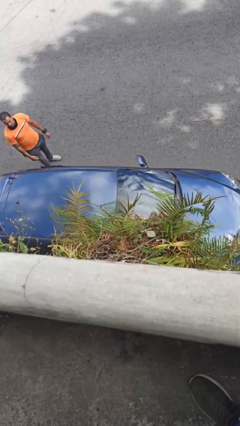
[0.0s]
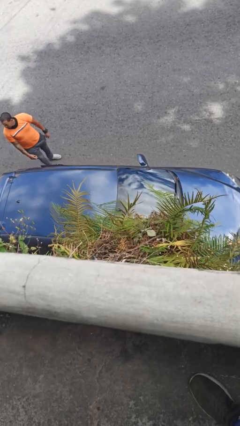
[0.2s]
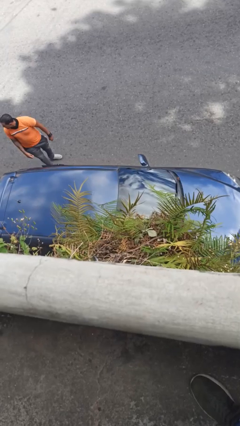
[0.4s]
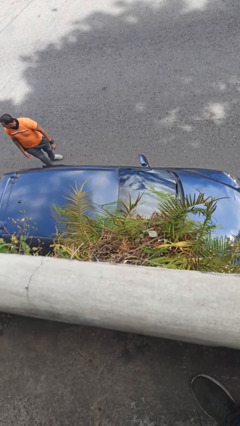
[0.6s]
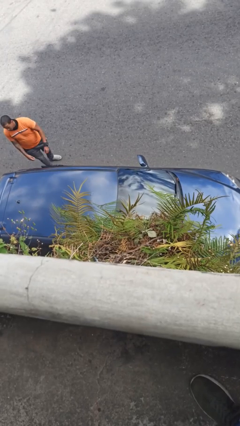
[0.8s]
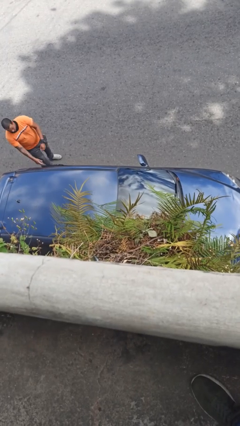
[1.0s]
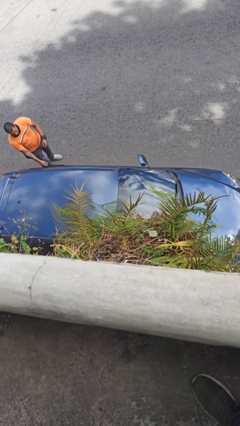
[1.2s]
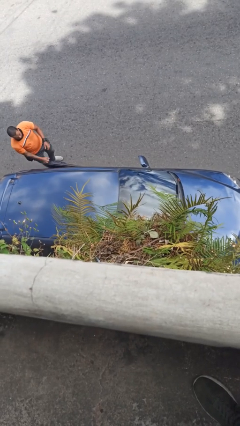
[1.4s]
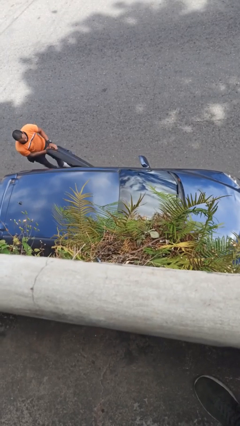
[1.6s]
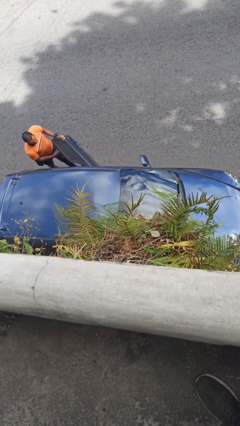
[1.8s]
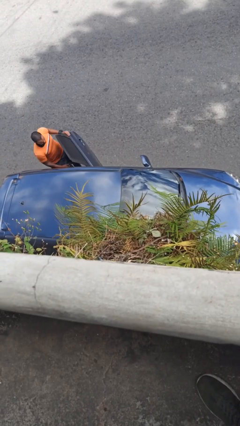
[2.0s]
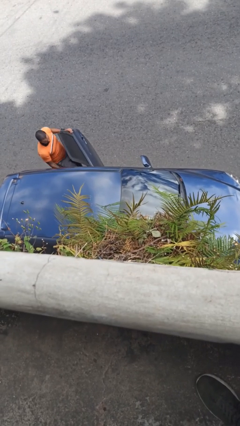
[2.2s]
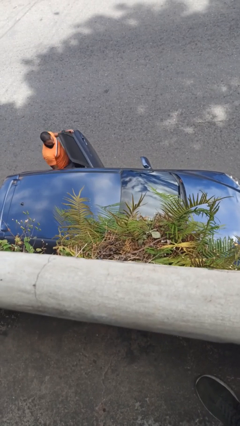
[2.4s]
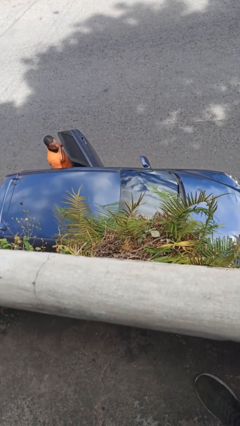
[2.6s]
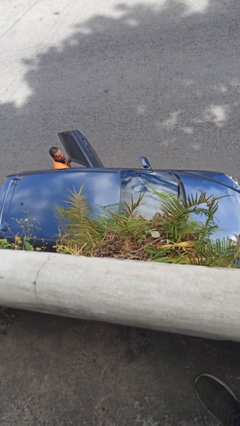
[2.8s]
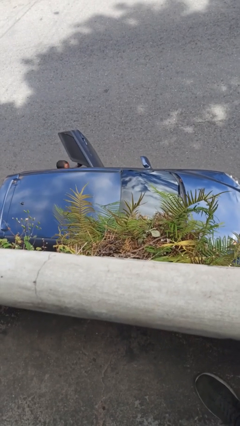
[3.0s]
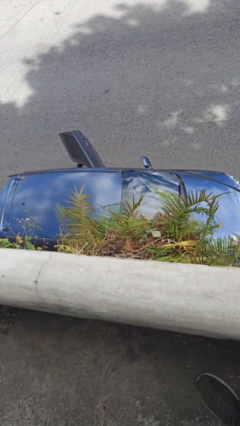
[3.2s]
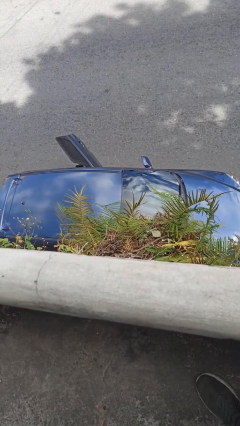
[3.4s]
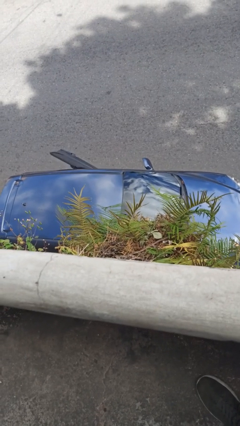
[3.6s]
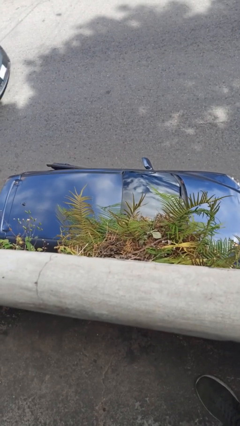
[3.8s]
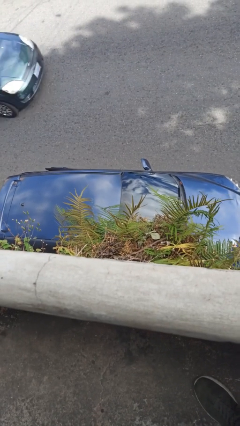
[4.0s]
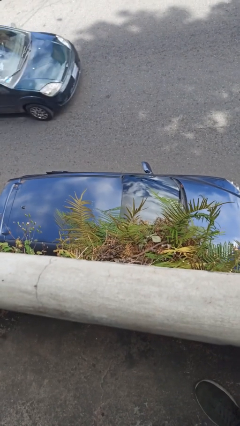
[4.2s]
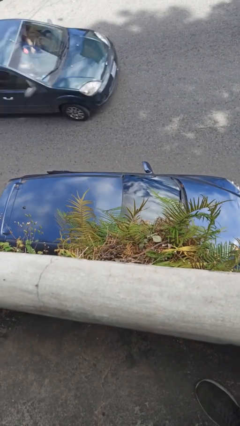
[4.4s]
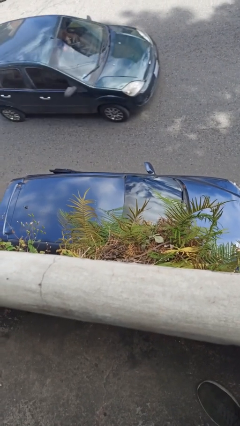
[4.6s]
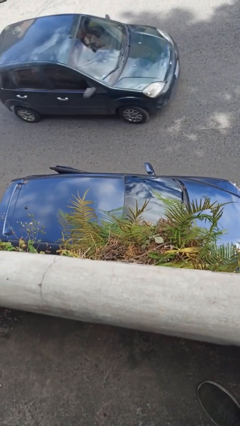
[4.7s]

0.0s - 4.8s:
car picks up person

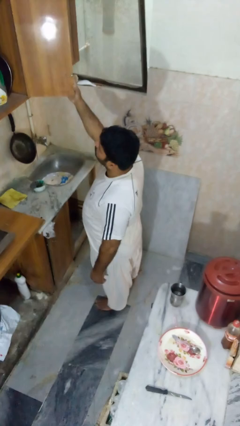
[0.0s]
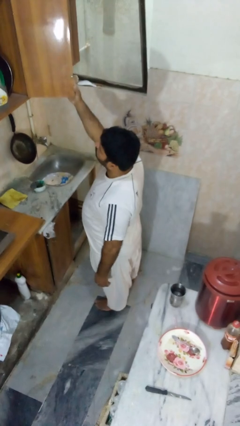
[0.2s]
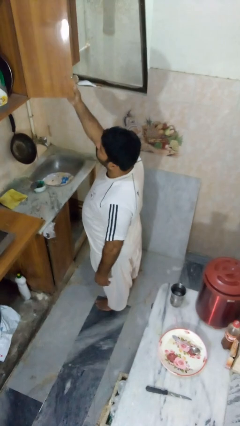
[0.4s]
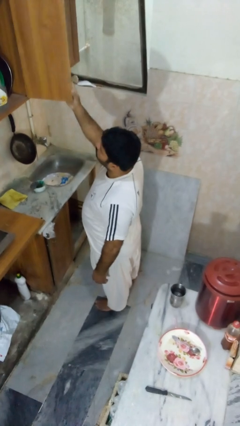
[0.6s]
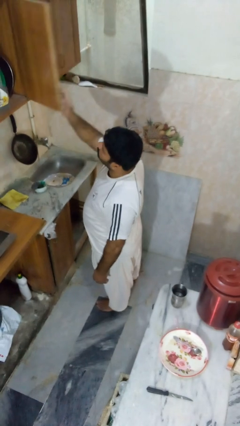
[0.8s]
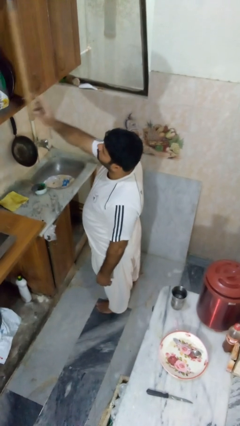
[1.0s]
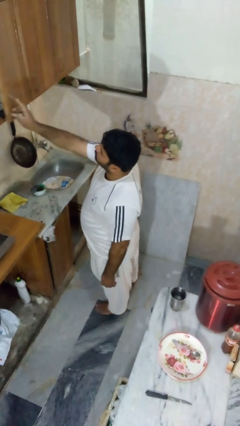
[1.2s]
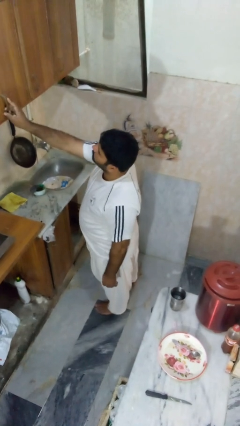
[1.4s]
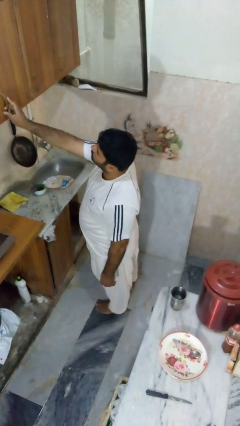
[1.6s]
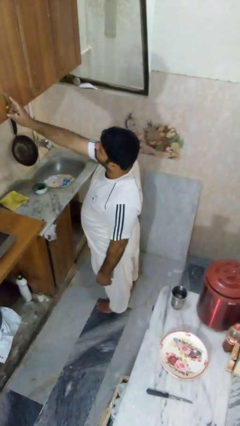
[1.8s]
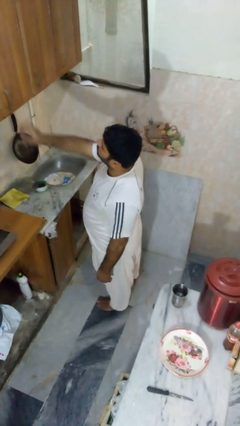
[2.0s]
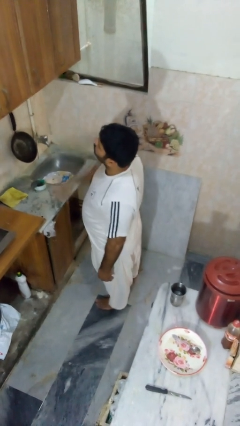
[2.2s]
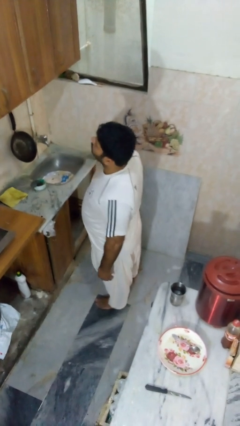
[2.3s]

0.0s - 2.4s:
person closes cabinet

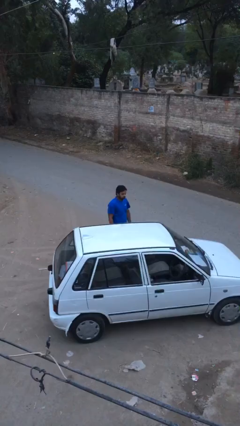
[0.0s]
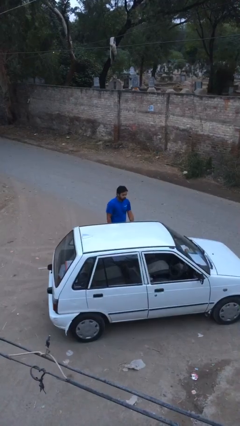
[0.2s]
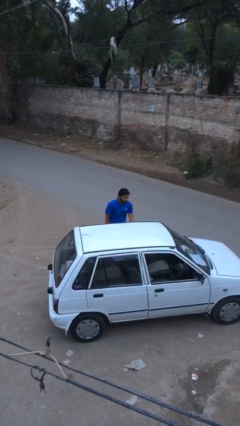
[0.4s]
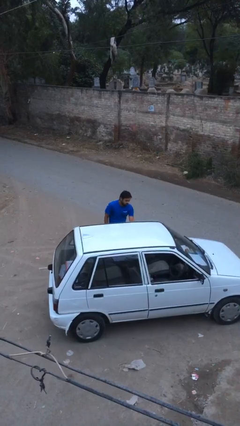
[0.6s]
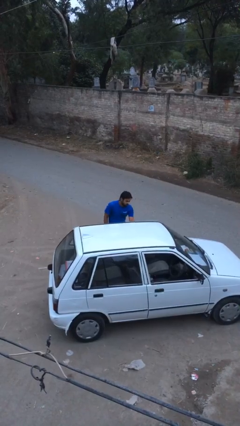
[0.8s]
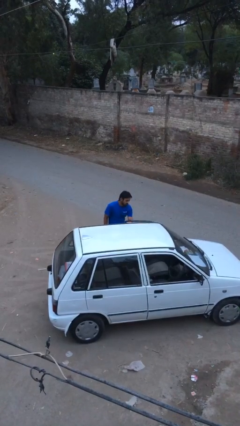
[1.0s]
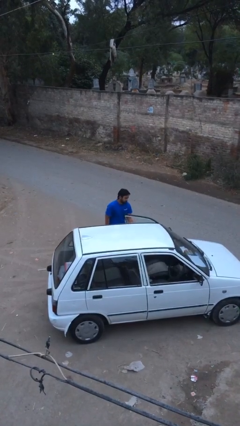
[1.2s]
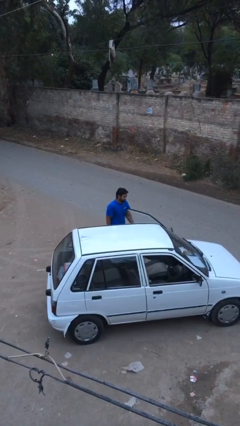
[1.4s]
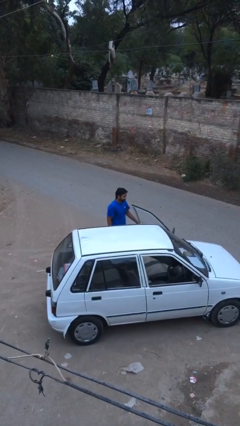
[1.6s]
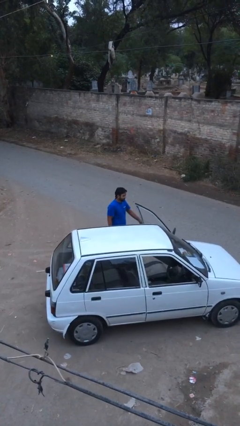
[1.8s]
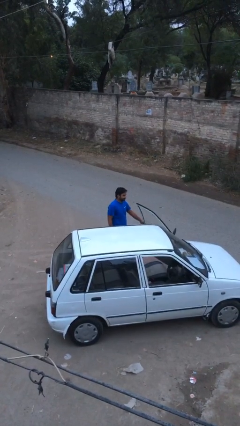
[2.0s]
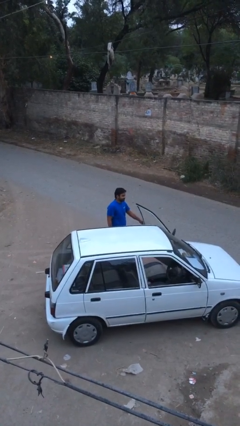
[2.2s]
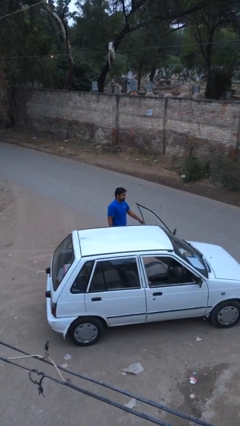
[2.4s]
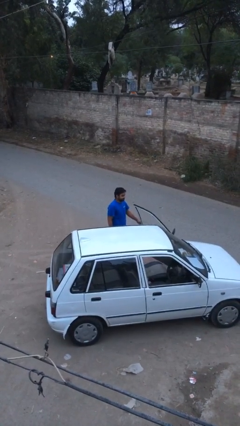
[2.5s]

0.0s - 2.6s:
person opens car door

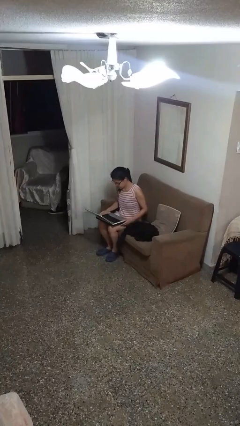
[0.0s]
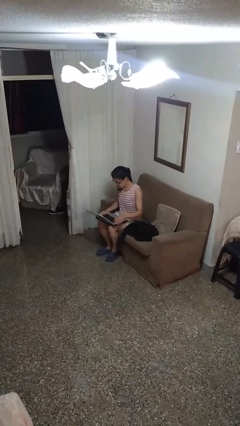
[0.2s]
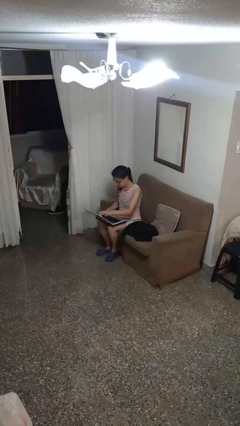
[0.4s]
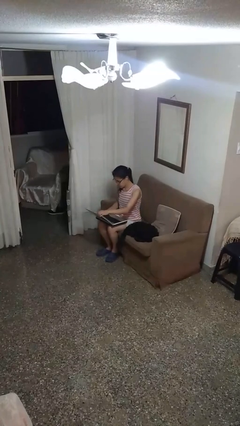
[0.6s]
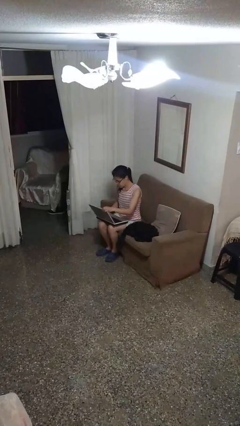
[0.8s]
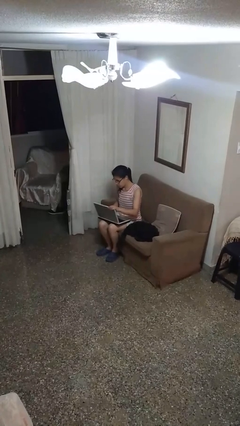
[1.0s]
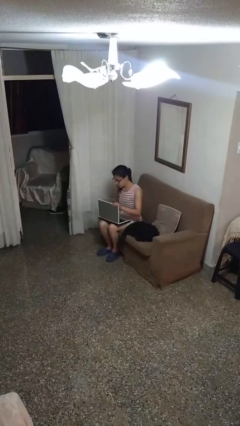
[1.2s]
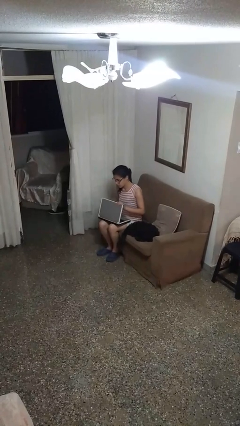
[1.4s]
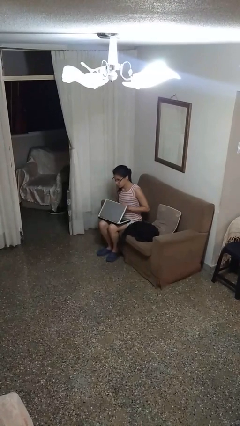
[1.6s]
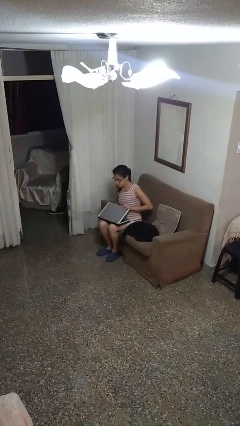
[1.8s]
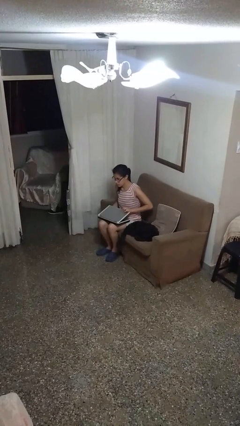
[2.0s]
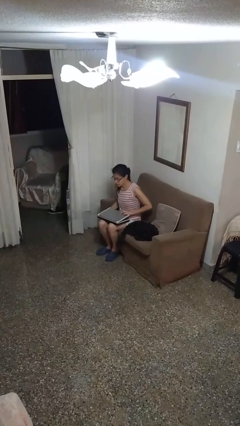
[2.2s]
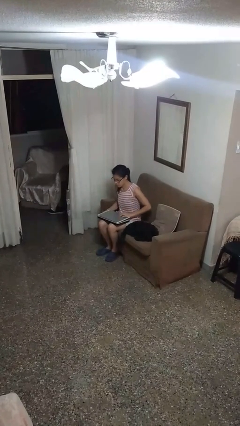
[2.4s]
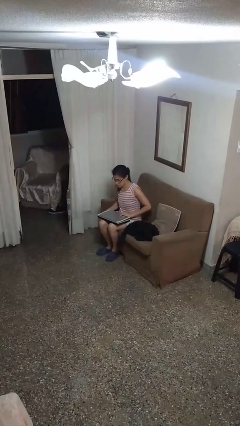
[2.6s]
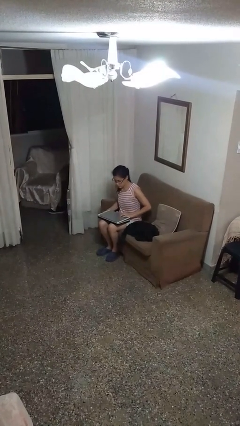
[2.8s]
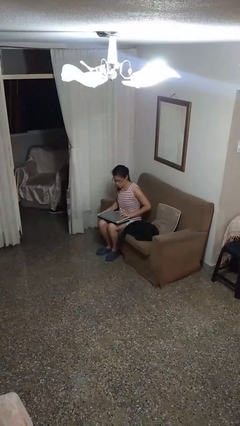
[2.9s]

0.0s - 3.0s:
person closes laptop

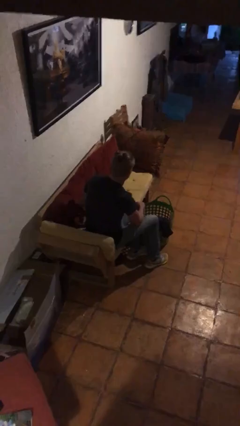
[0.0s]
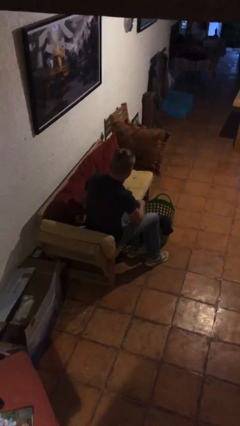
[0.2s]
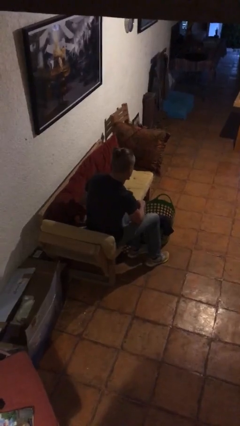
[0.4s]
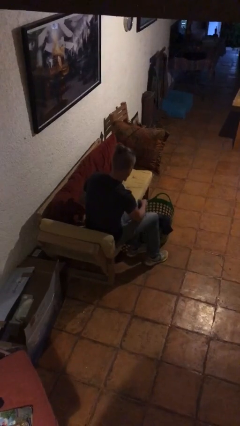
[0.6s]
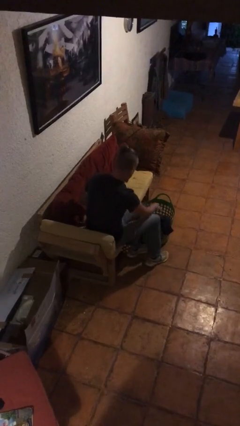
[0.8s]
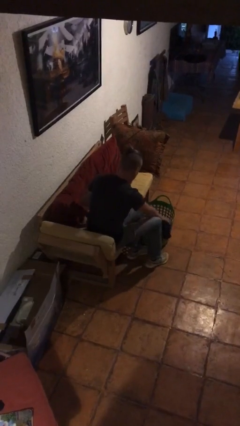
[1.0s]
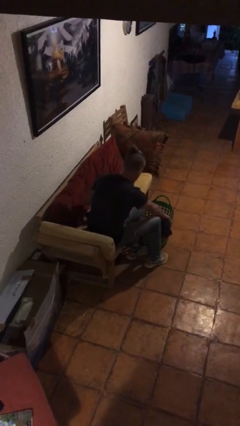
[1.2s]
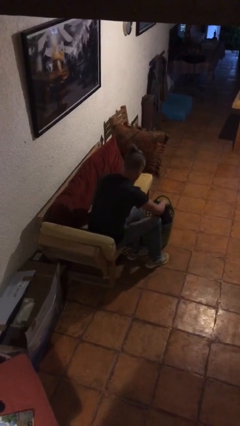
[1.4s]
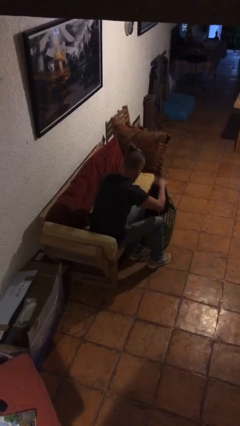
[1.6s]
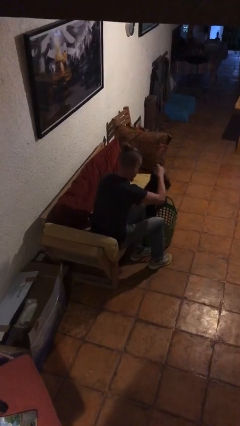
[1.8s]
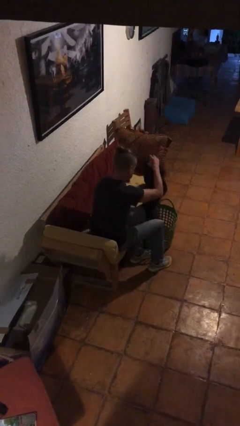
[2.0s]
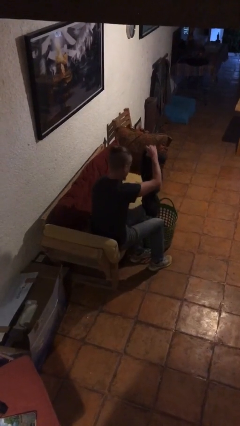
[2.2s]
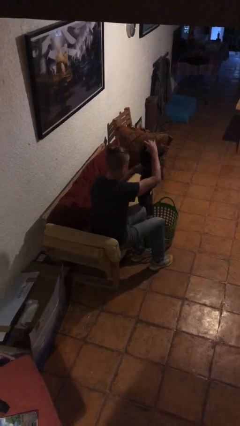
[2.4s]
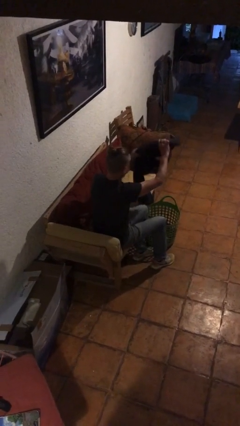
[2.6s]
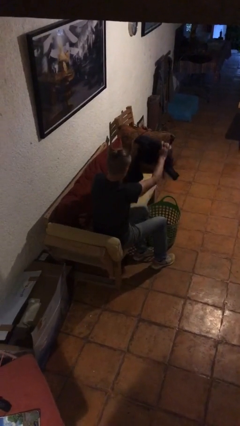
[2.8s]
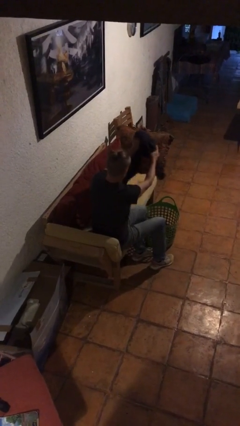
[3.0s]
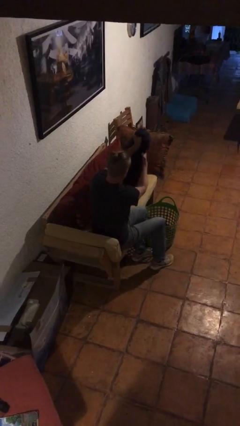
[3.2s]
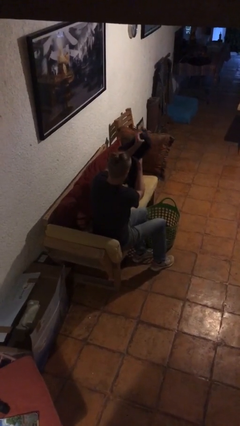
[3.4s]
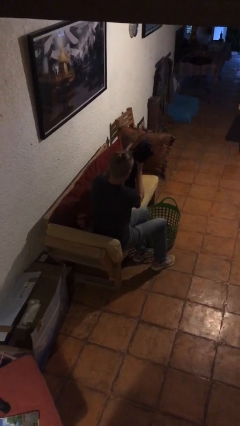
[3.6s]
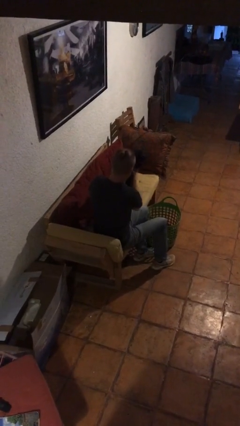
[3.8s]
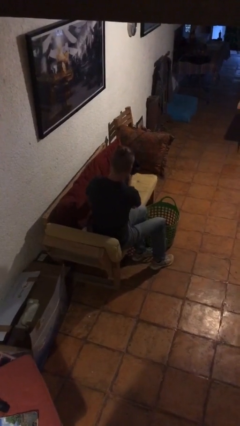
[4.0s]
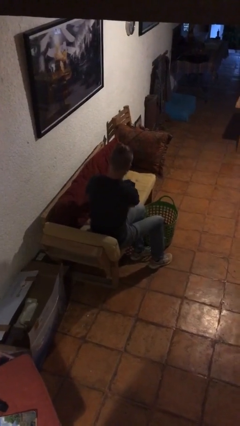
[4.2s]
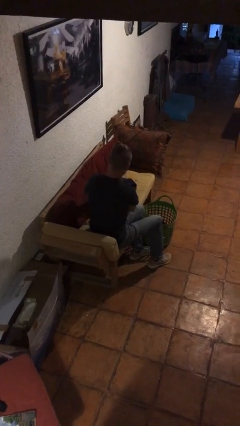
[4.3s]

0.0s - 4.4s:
person folds pants

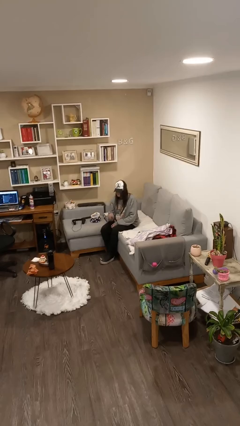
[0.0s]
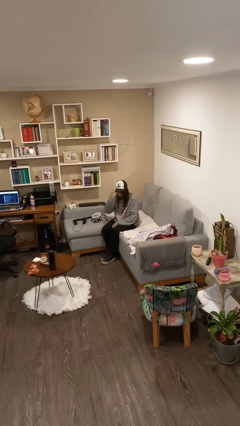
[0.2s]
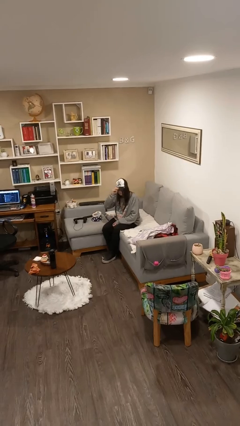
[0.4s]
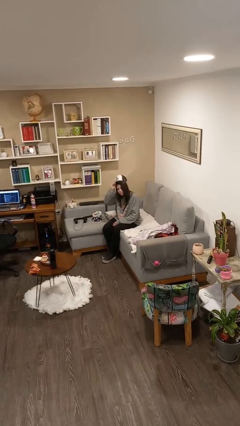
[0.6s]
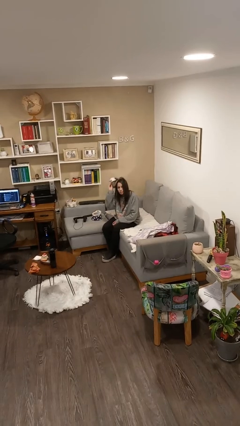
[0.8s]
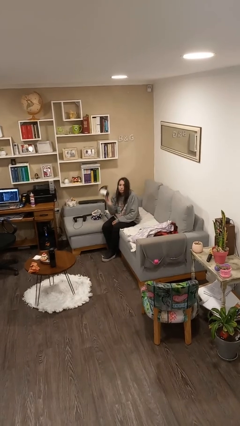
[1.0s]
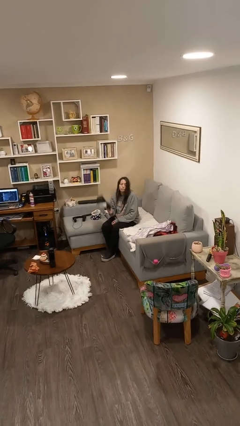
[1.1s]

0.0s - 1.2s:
person takes off hat
